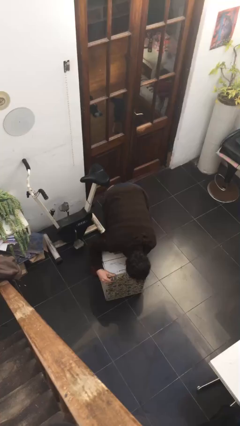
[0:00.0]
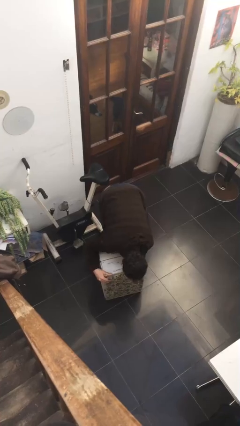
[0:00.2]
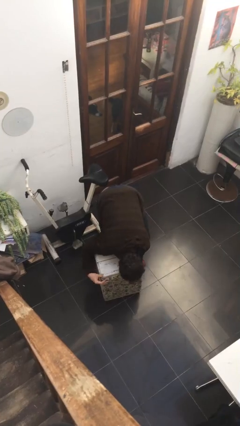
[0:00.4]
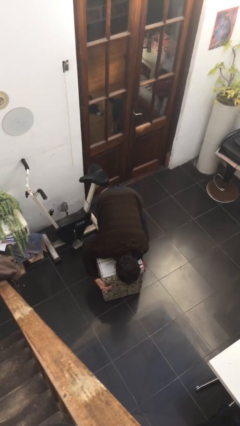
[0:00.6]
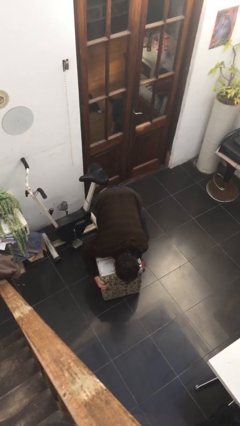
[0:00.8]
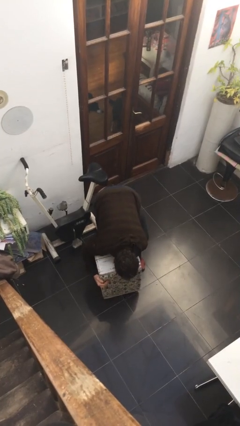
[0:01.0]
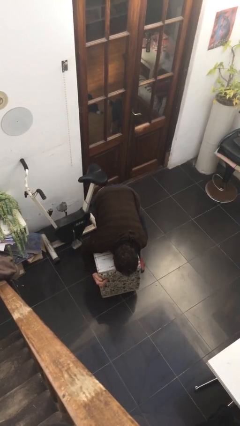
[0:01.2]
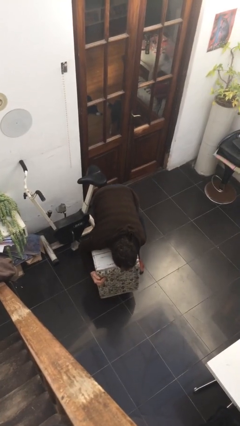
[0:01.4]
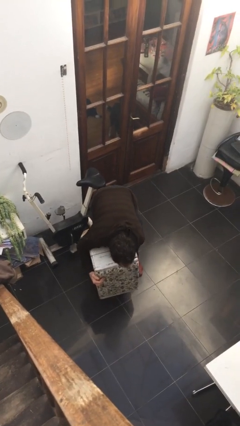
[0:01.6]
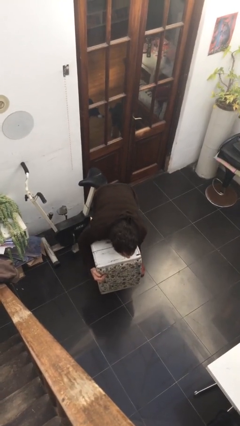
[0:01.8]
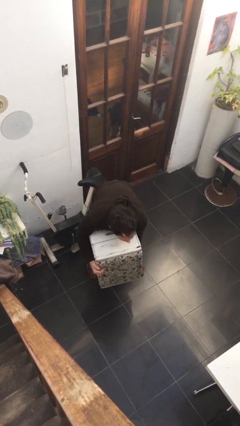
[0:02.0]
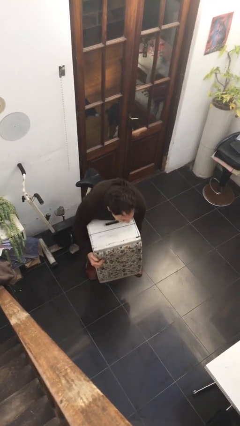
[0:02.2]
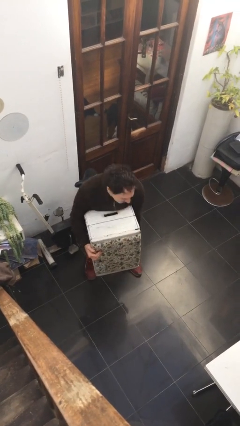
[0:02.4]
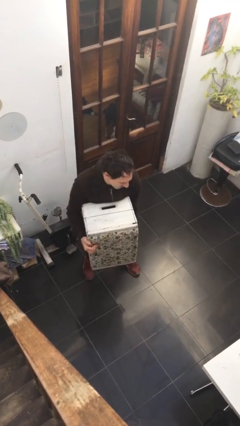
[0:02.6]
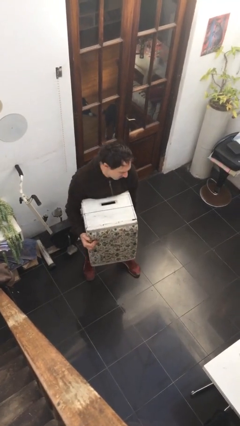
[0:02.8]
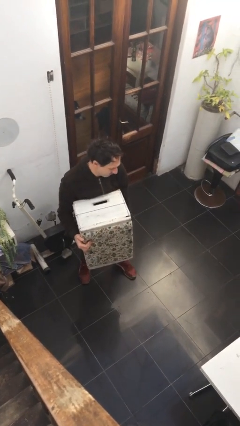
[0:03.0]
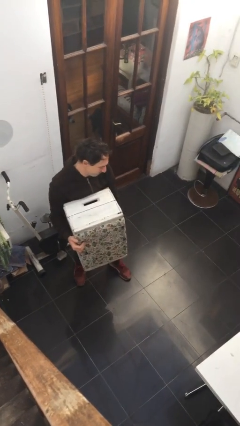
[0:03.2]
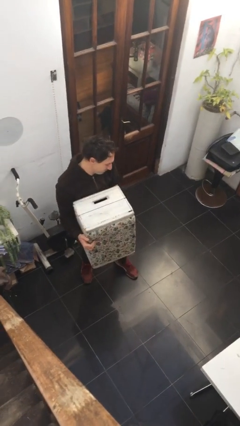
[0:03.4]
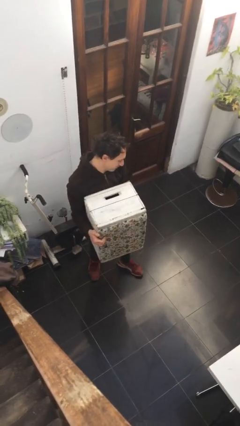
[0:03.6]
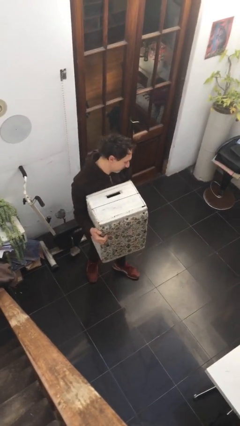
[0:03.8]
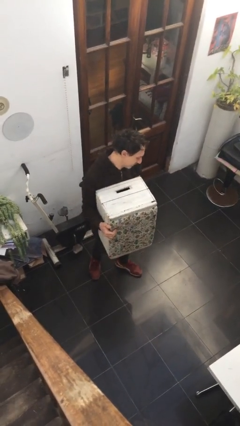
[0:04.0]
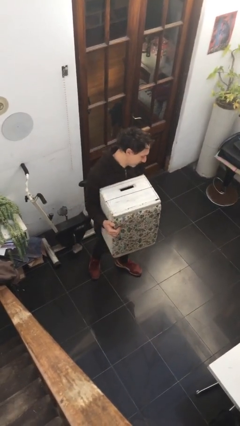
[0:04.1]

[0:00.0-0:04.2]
person picks up object from floor

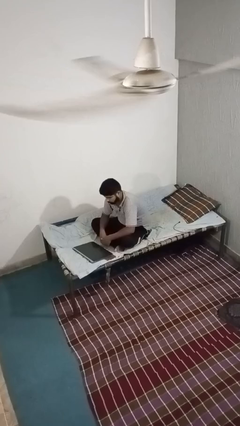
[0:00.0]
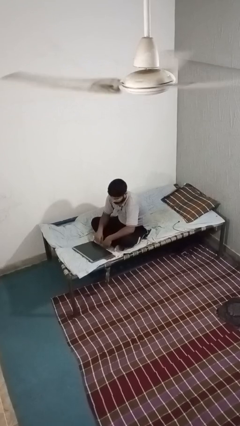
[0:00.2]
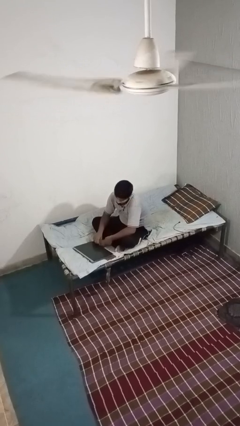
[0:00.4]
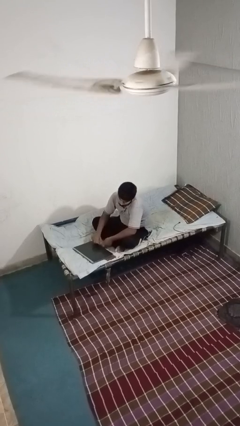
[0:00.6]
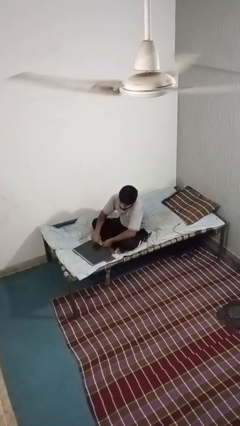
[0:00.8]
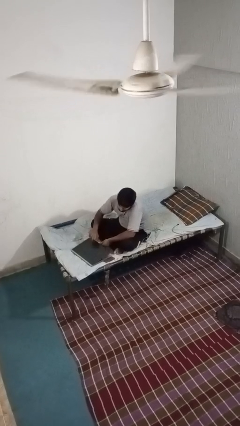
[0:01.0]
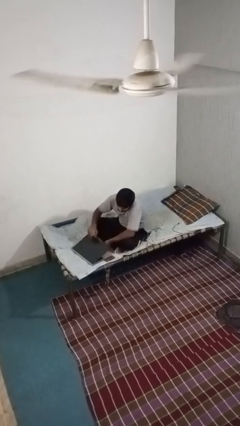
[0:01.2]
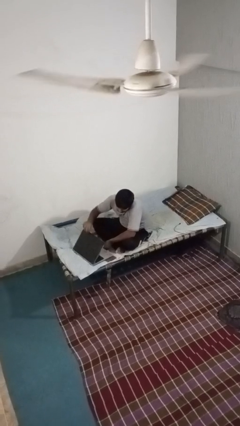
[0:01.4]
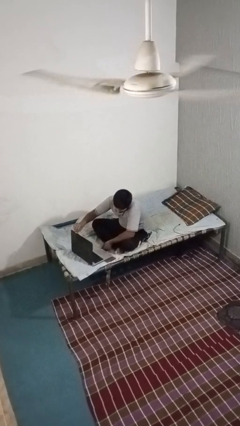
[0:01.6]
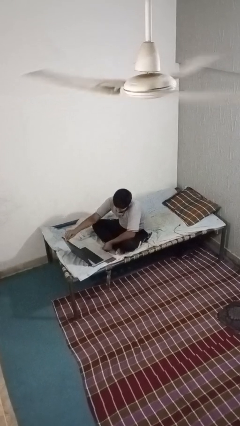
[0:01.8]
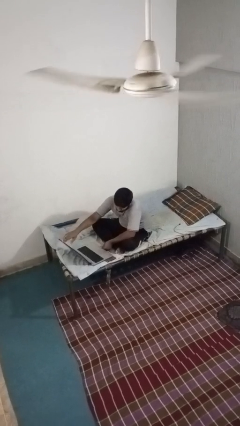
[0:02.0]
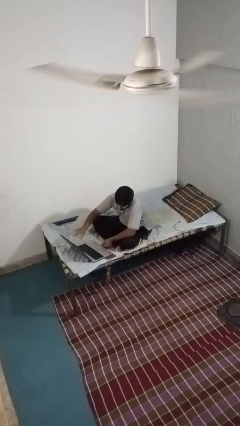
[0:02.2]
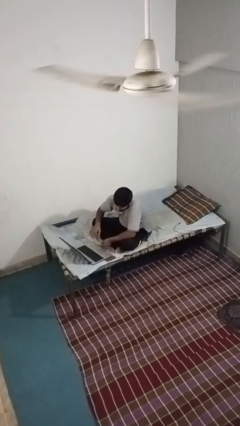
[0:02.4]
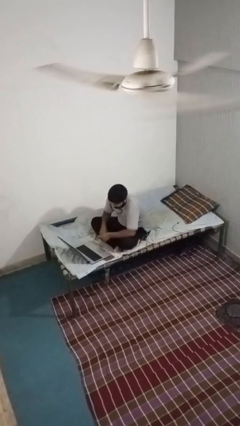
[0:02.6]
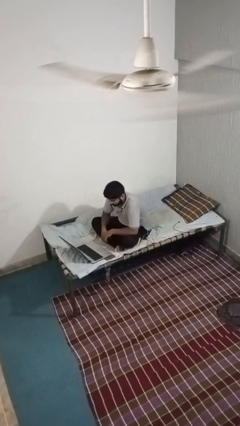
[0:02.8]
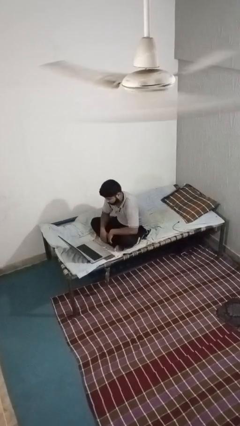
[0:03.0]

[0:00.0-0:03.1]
person opens laptop

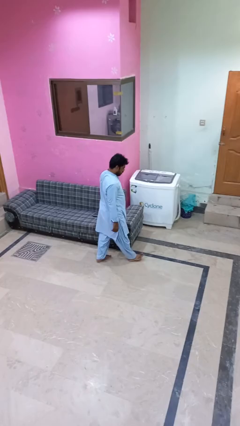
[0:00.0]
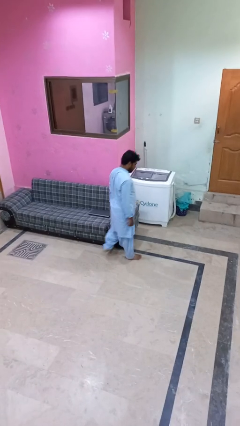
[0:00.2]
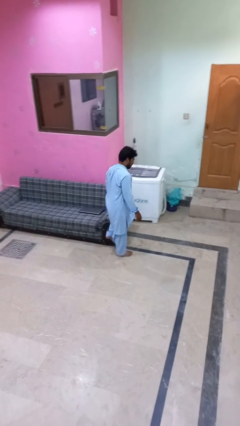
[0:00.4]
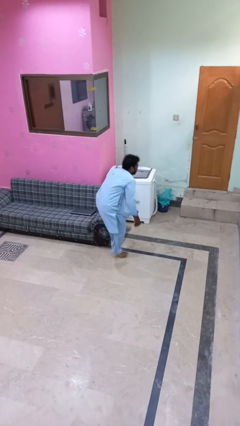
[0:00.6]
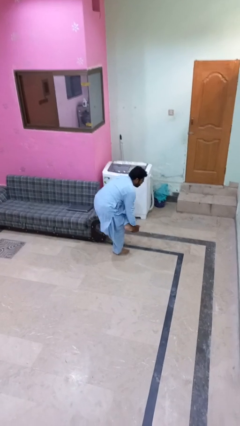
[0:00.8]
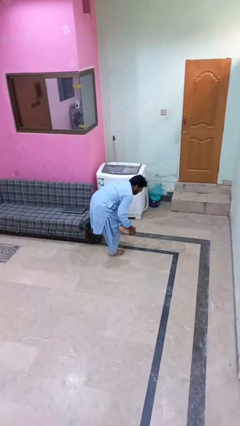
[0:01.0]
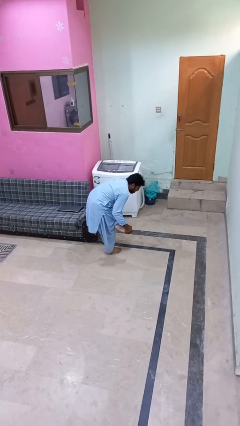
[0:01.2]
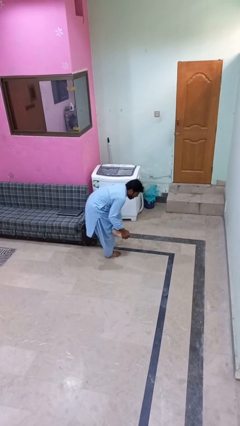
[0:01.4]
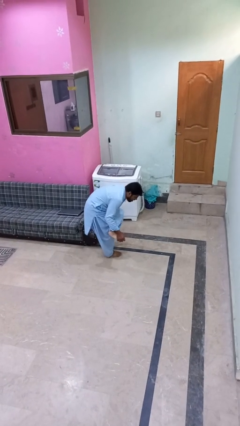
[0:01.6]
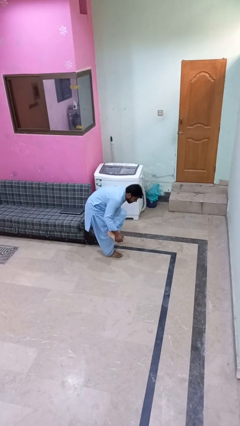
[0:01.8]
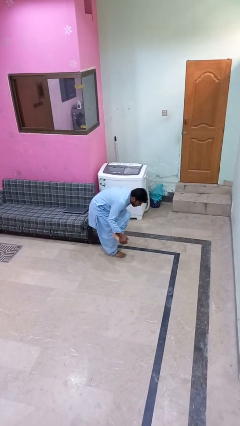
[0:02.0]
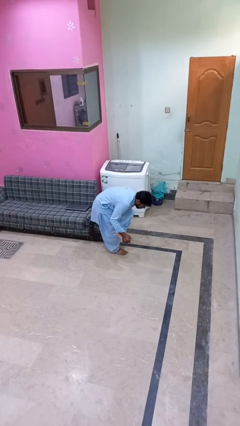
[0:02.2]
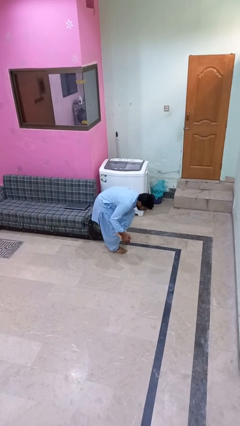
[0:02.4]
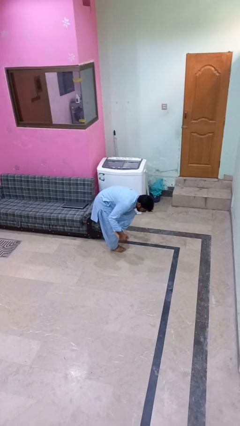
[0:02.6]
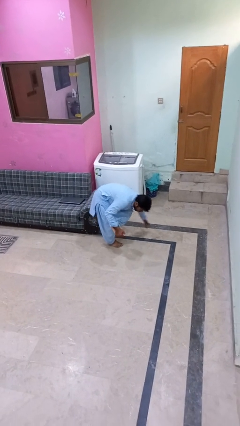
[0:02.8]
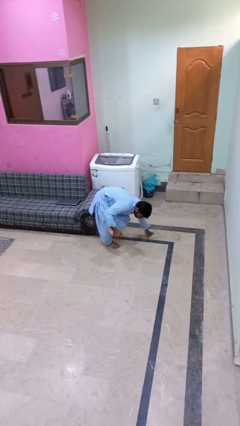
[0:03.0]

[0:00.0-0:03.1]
person trips on object on floor

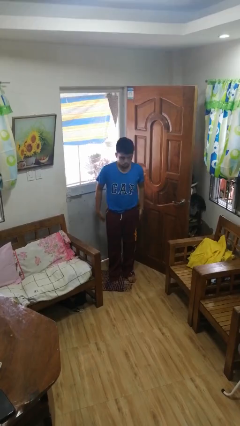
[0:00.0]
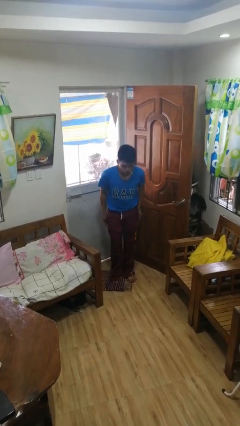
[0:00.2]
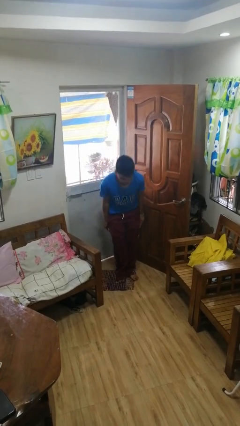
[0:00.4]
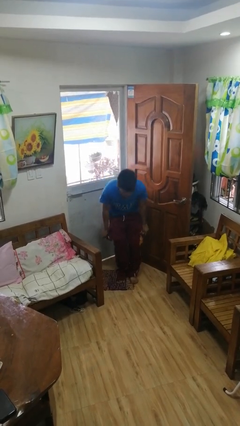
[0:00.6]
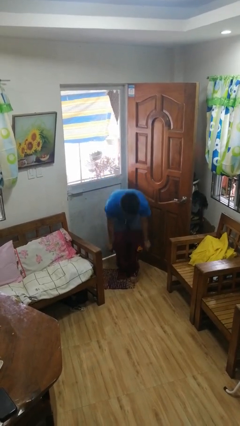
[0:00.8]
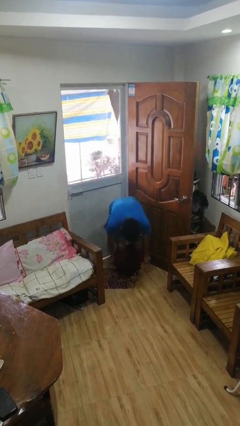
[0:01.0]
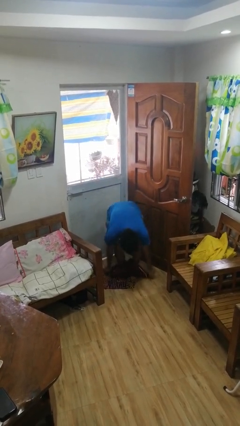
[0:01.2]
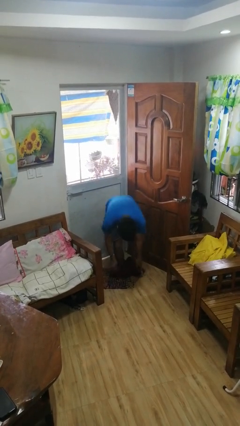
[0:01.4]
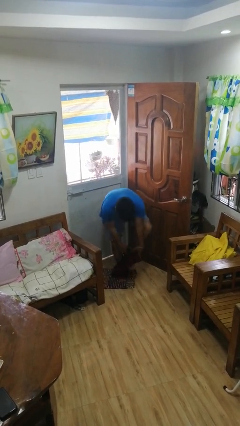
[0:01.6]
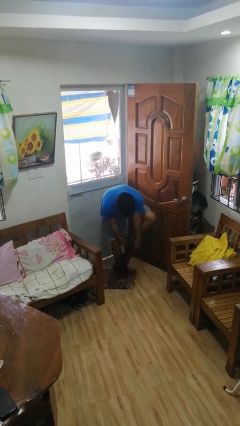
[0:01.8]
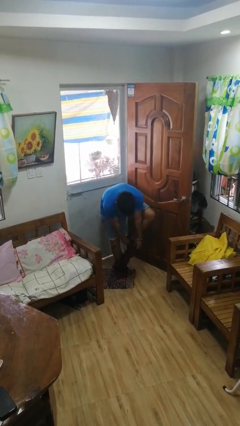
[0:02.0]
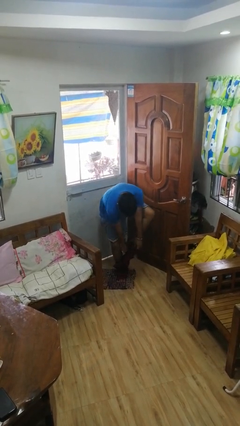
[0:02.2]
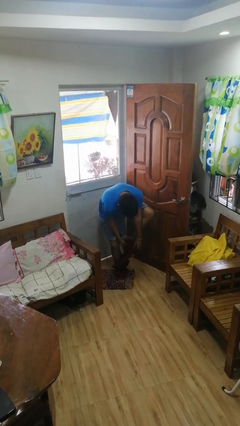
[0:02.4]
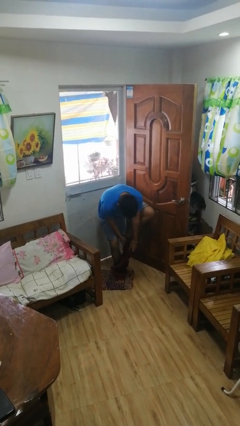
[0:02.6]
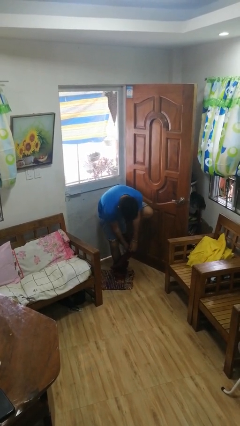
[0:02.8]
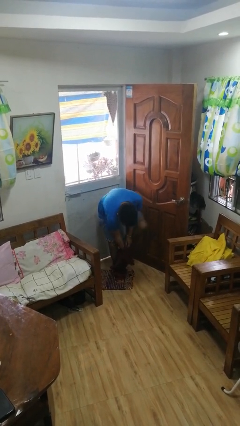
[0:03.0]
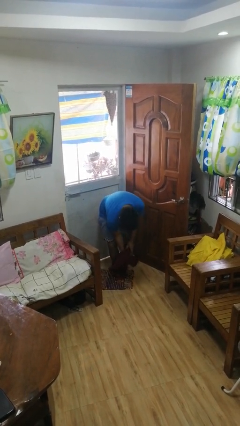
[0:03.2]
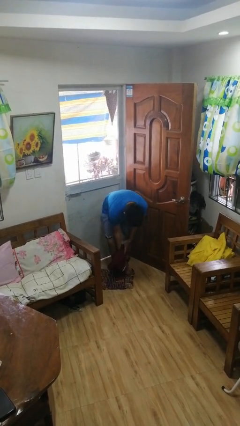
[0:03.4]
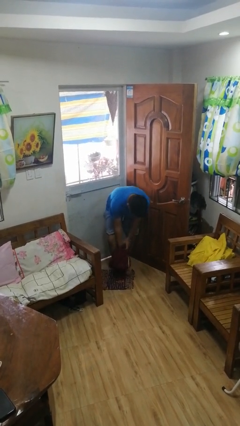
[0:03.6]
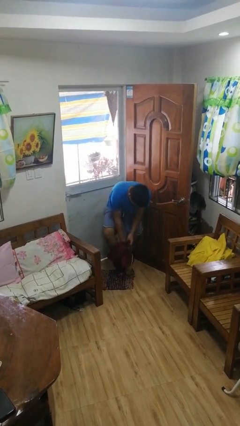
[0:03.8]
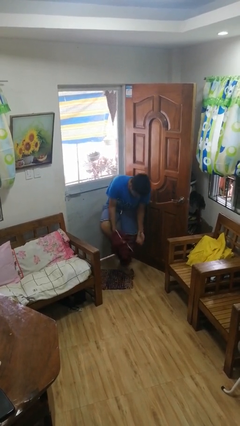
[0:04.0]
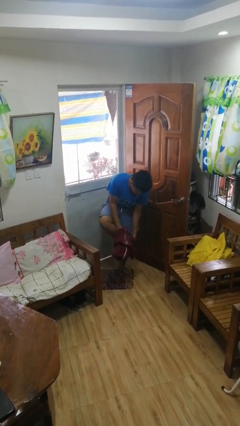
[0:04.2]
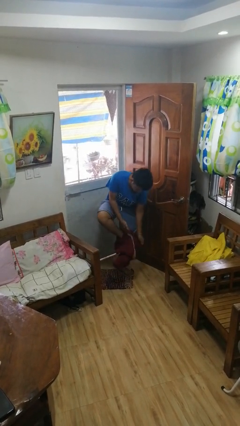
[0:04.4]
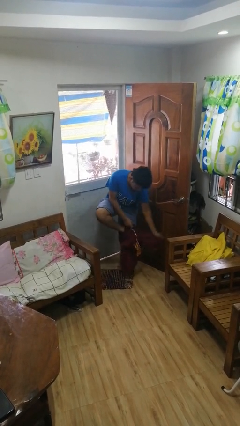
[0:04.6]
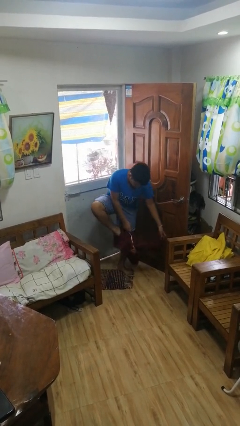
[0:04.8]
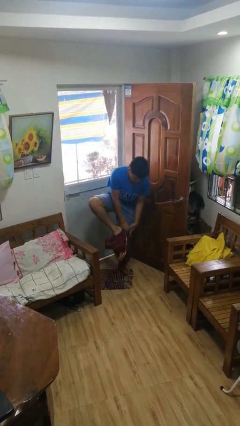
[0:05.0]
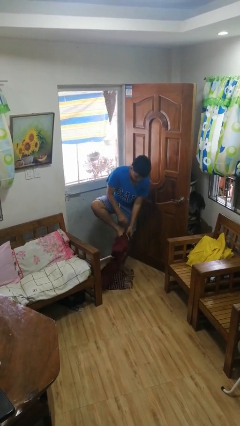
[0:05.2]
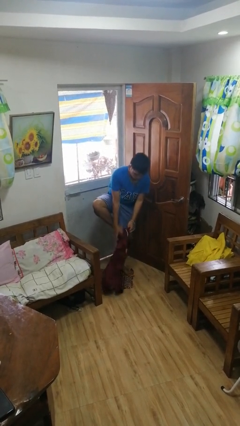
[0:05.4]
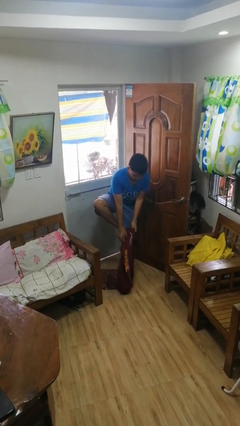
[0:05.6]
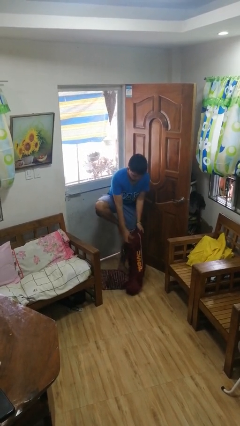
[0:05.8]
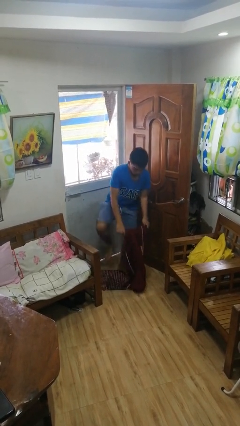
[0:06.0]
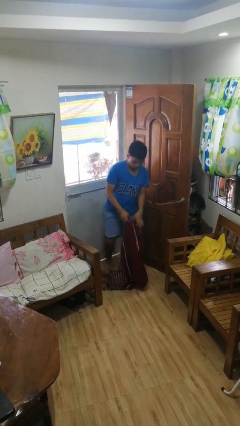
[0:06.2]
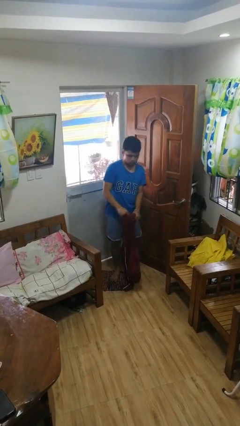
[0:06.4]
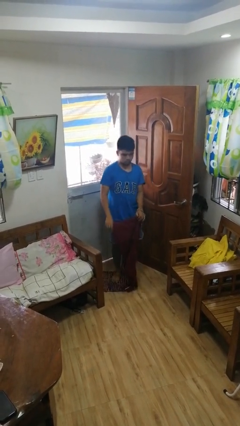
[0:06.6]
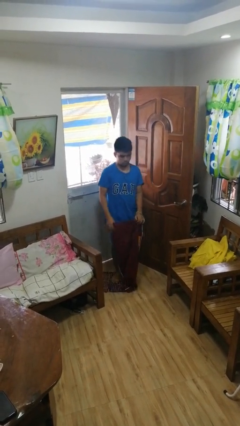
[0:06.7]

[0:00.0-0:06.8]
person takes off pants

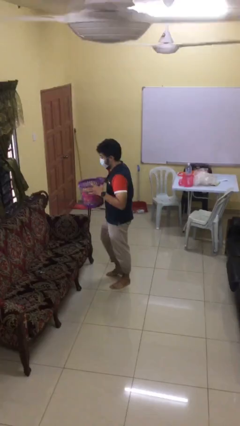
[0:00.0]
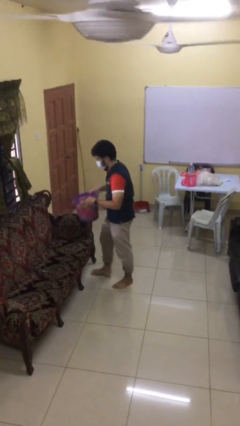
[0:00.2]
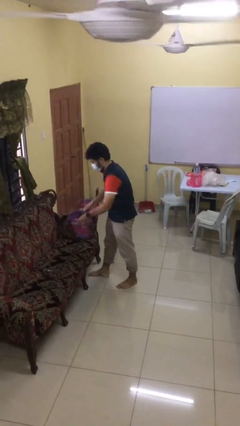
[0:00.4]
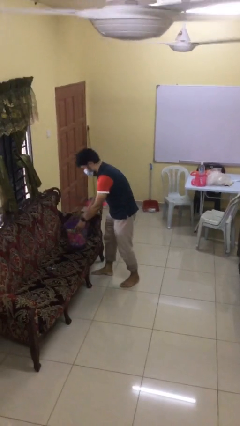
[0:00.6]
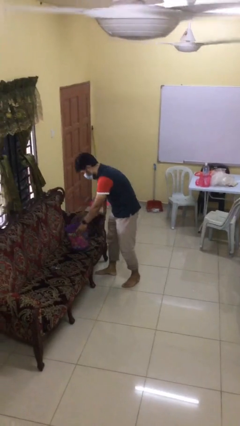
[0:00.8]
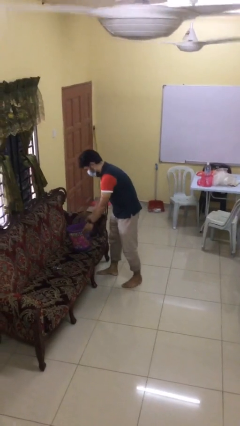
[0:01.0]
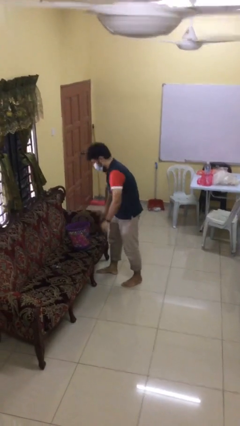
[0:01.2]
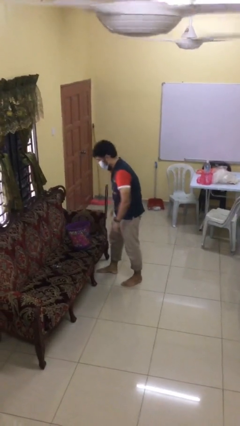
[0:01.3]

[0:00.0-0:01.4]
person puts down object on couch
